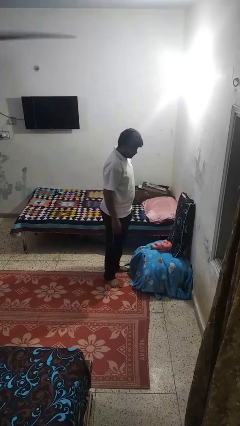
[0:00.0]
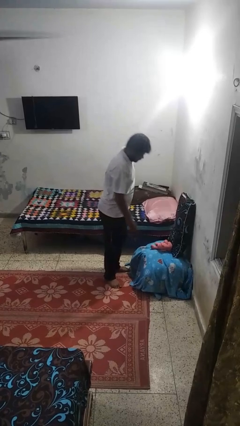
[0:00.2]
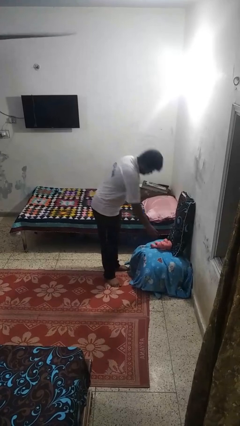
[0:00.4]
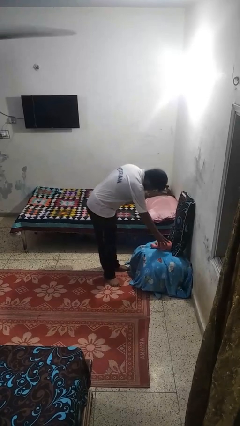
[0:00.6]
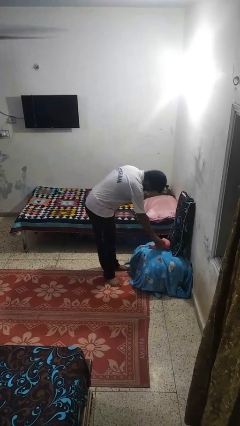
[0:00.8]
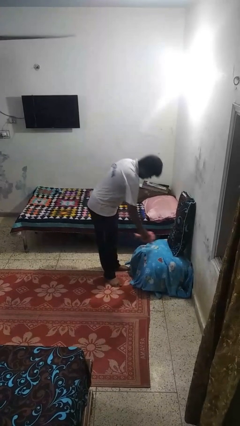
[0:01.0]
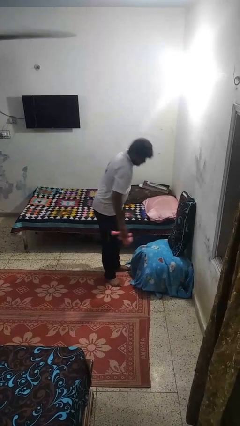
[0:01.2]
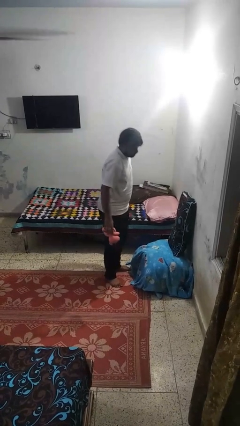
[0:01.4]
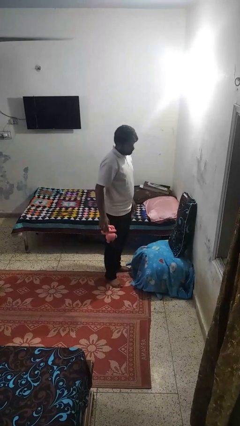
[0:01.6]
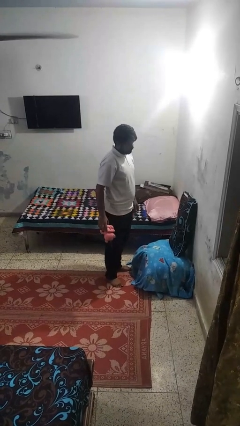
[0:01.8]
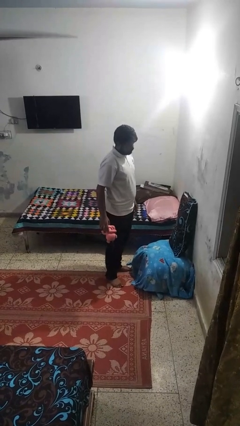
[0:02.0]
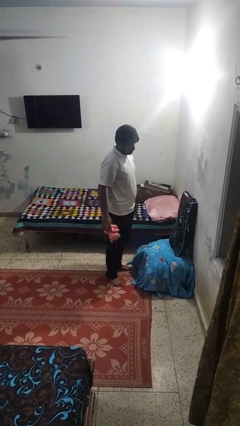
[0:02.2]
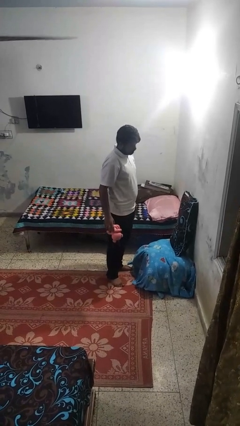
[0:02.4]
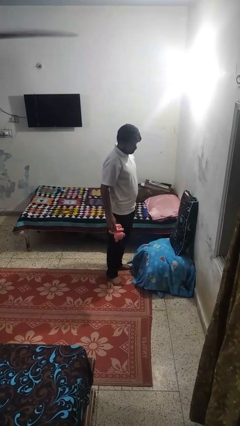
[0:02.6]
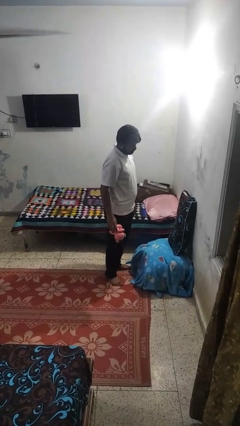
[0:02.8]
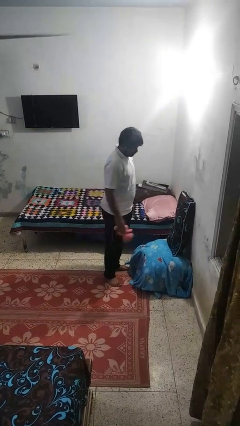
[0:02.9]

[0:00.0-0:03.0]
person picks up object from couch

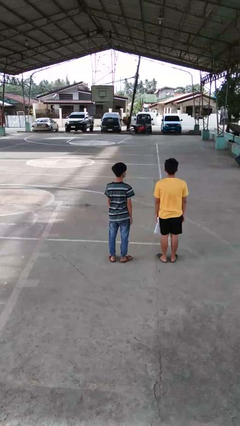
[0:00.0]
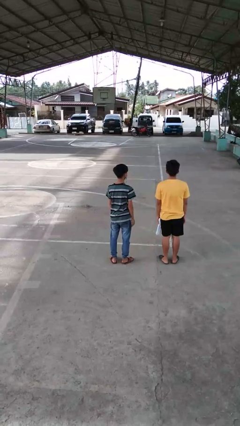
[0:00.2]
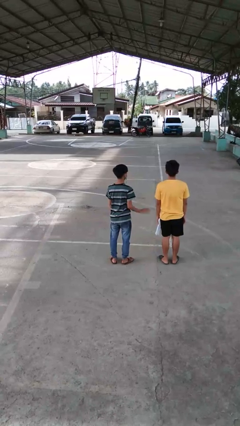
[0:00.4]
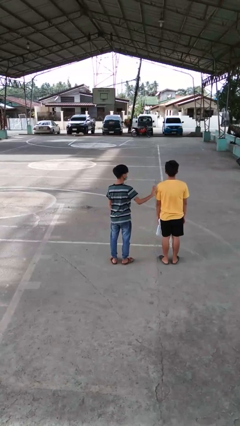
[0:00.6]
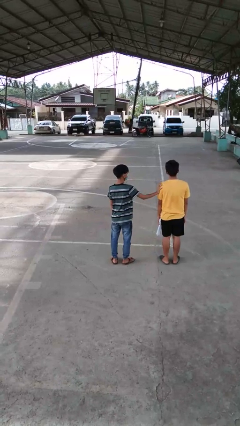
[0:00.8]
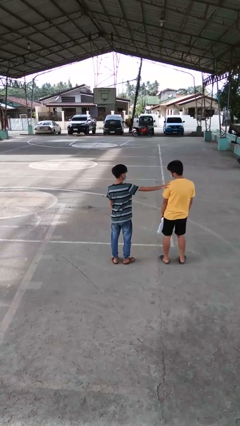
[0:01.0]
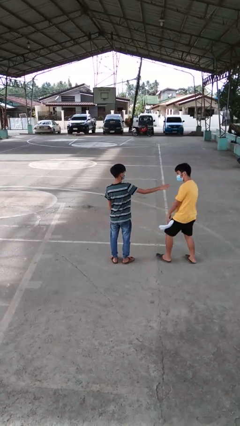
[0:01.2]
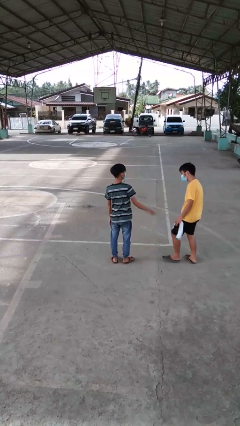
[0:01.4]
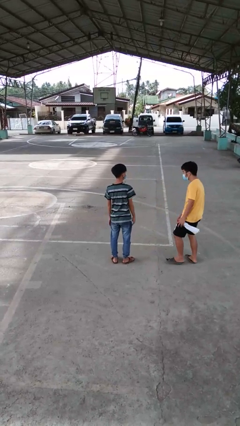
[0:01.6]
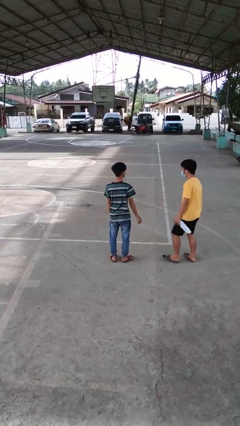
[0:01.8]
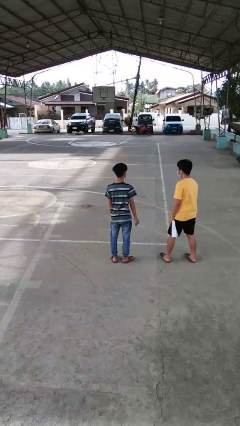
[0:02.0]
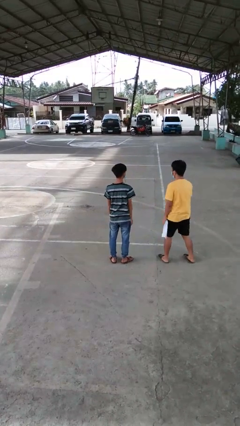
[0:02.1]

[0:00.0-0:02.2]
person shoves person

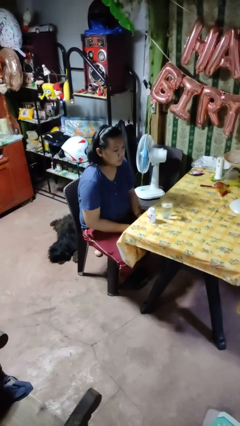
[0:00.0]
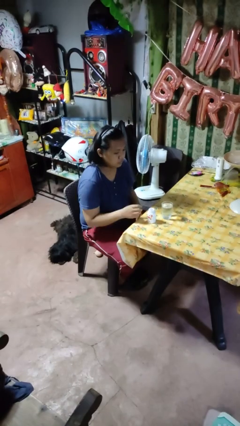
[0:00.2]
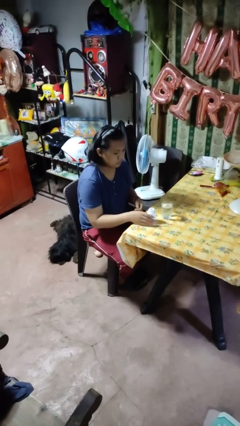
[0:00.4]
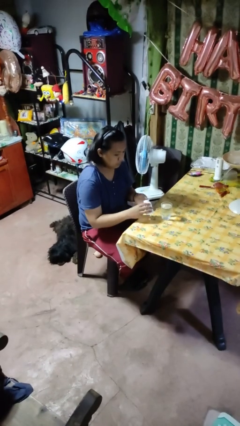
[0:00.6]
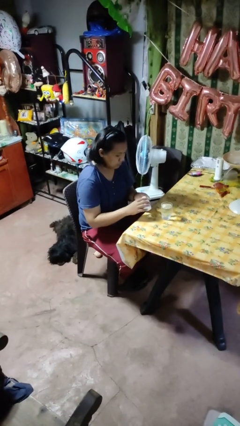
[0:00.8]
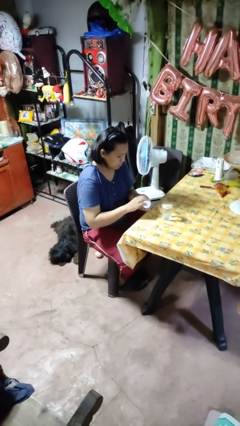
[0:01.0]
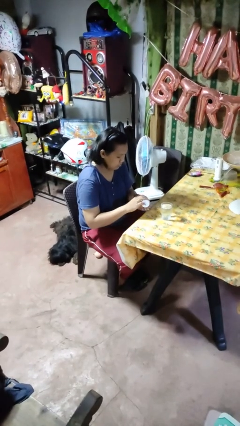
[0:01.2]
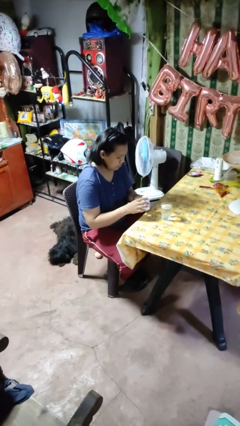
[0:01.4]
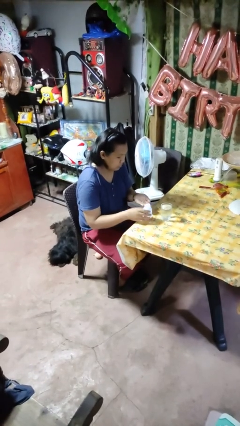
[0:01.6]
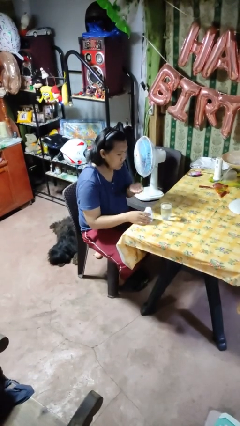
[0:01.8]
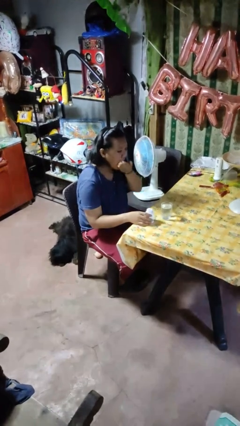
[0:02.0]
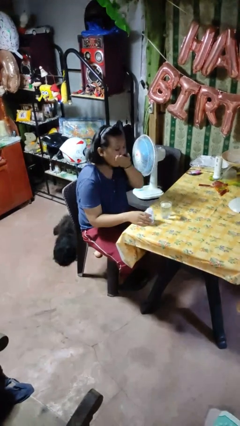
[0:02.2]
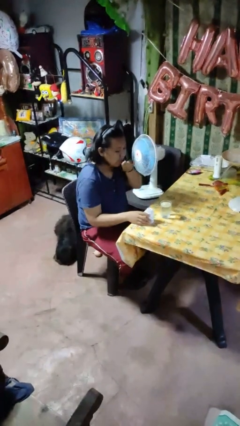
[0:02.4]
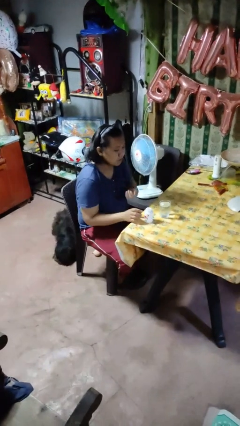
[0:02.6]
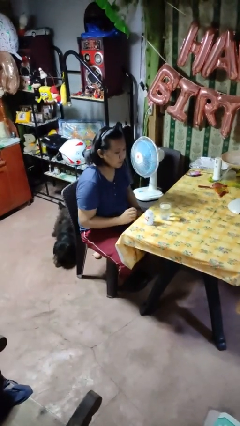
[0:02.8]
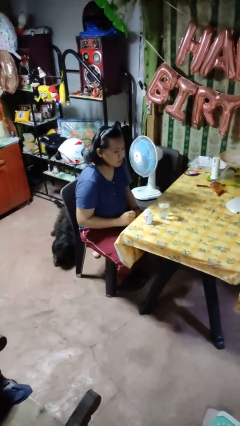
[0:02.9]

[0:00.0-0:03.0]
person takes medicine pills

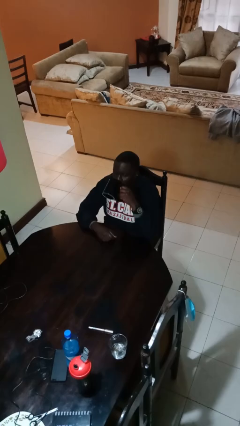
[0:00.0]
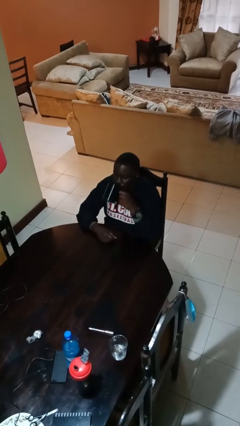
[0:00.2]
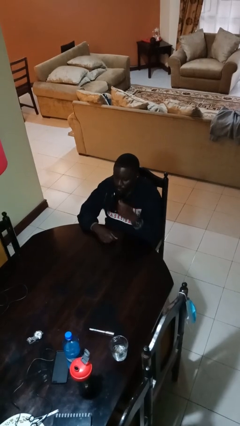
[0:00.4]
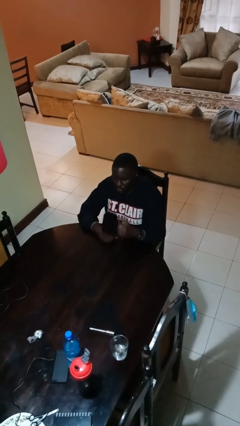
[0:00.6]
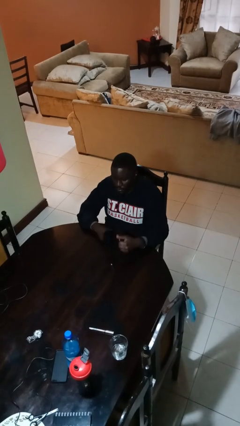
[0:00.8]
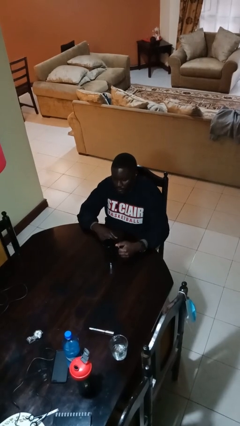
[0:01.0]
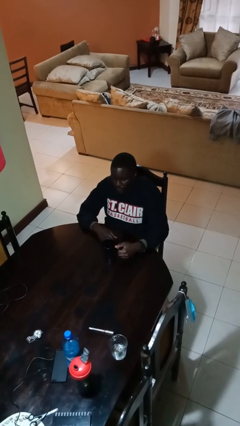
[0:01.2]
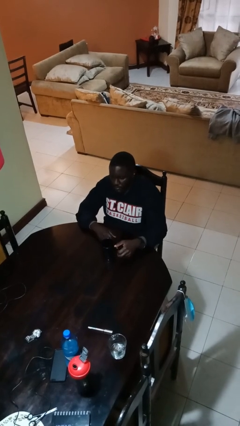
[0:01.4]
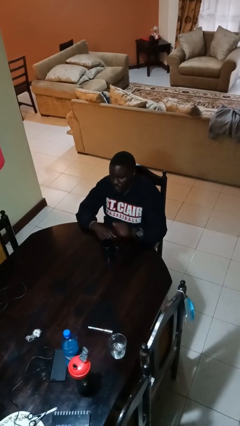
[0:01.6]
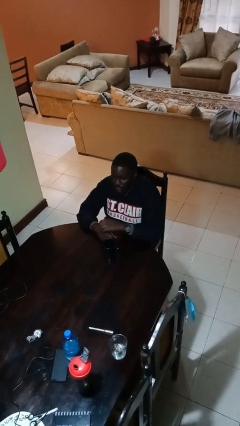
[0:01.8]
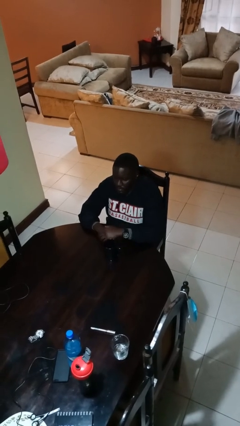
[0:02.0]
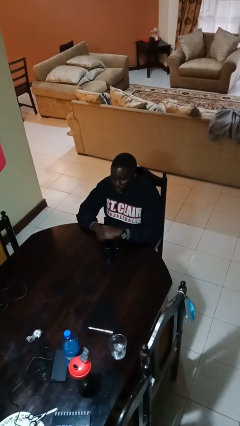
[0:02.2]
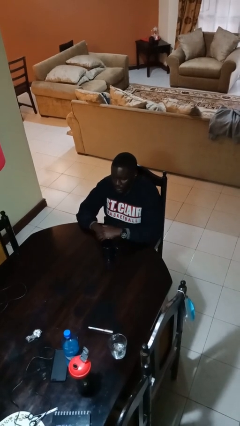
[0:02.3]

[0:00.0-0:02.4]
person puts down object on table

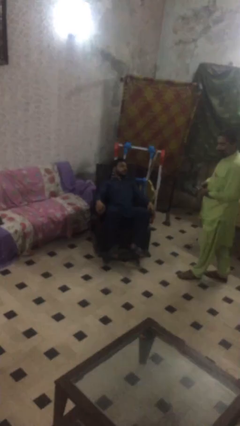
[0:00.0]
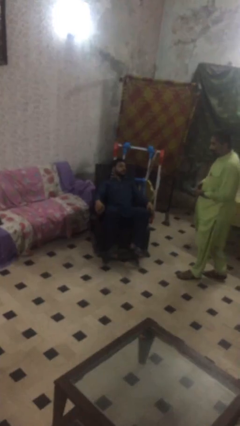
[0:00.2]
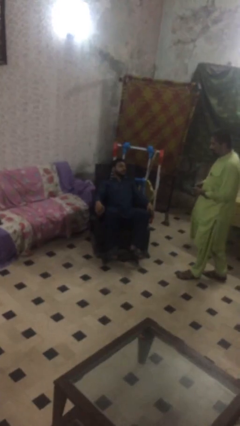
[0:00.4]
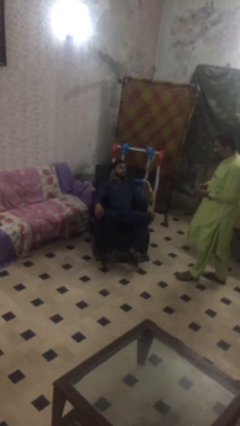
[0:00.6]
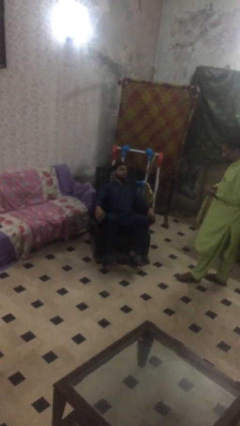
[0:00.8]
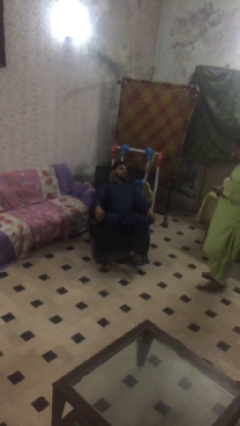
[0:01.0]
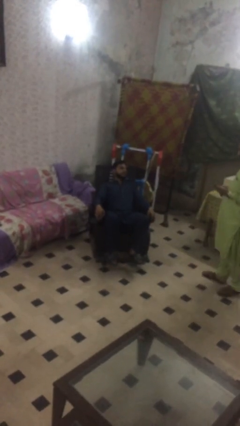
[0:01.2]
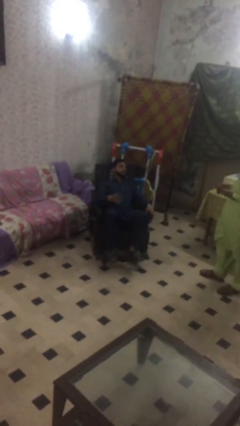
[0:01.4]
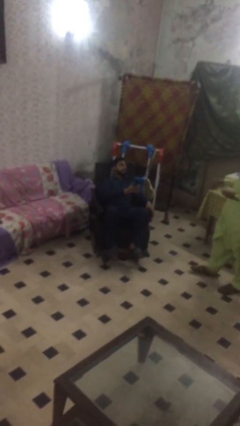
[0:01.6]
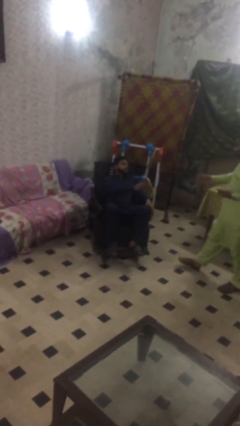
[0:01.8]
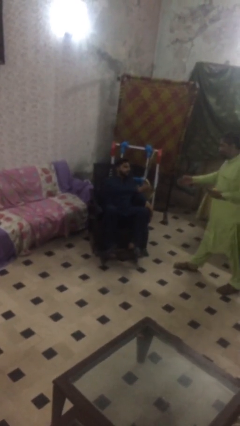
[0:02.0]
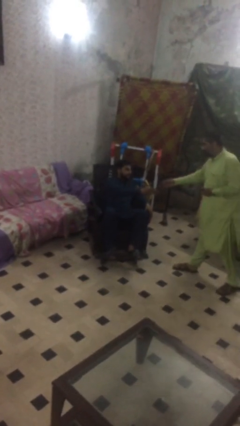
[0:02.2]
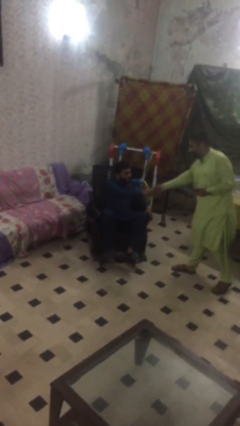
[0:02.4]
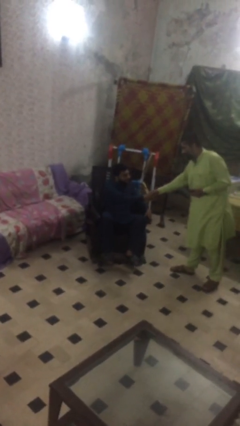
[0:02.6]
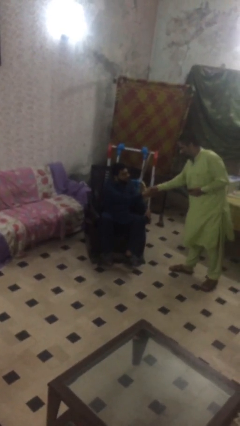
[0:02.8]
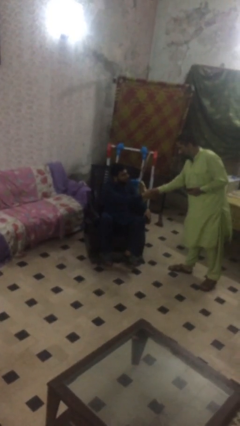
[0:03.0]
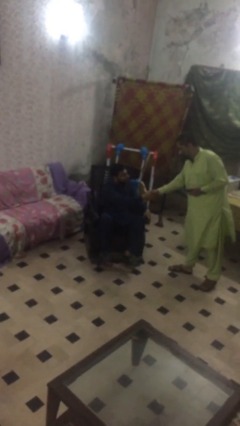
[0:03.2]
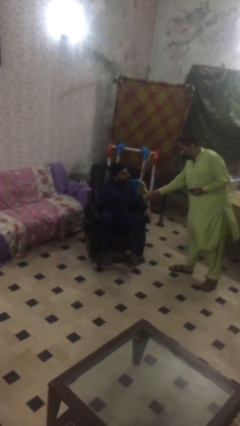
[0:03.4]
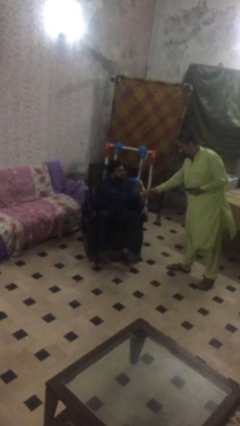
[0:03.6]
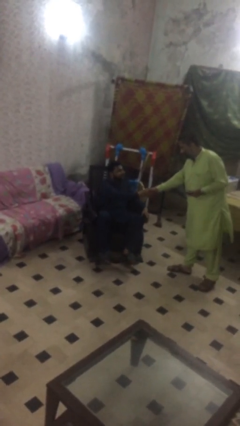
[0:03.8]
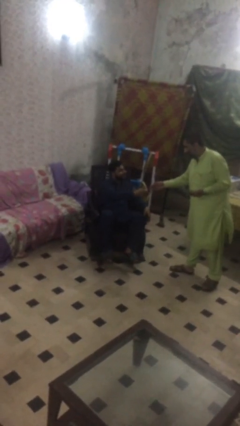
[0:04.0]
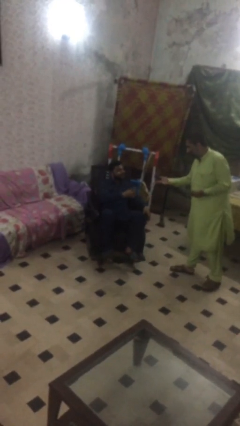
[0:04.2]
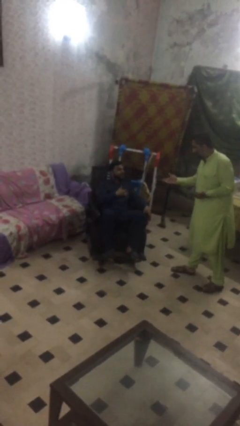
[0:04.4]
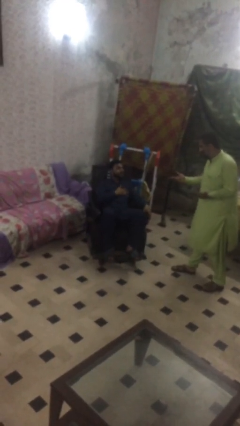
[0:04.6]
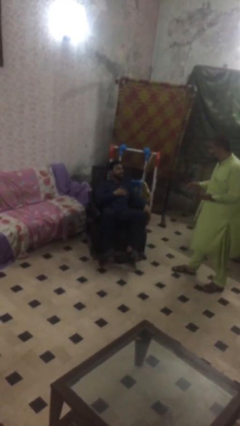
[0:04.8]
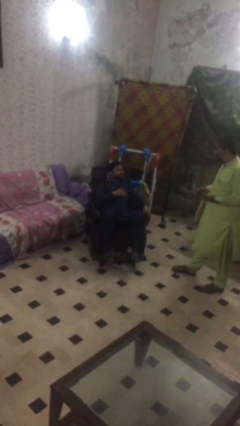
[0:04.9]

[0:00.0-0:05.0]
person shakes hand

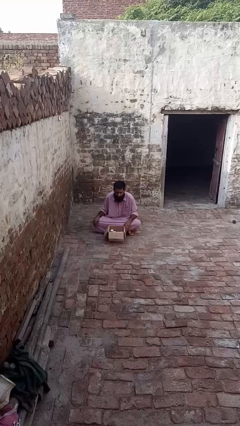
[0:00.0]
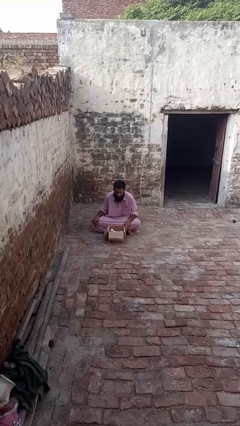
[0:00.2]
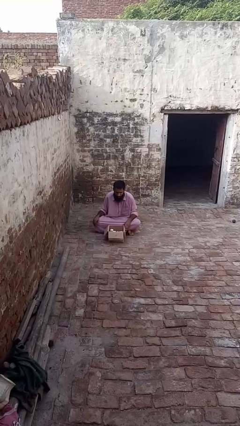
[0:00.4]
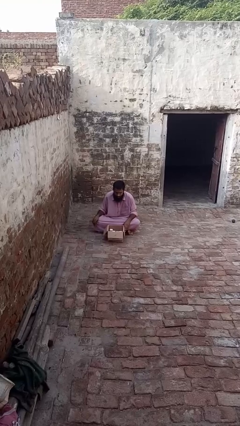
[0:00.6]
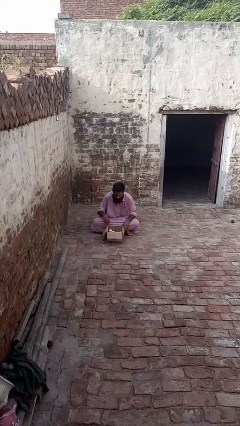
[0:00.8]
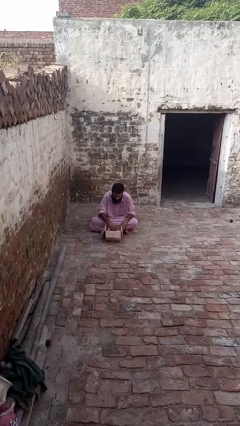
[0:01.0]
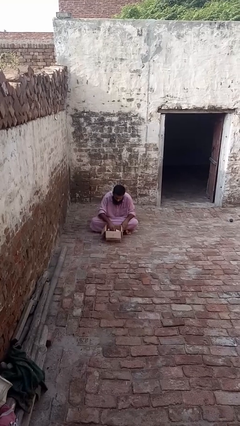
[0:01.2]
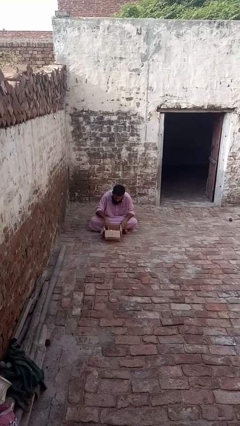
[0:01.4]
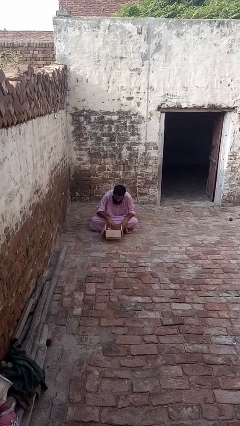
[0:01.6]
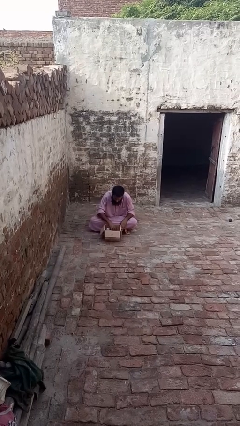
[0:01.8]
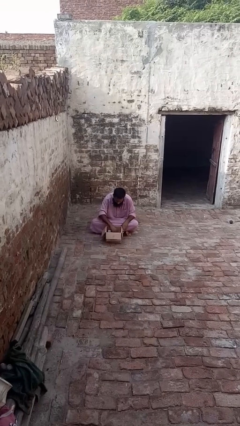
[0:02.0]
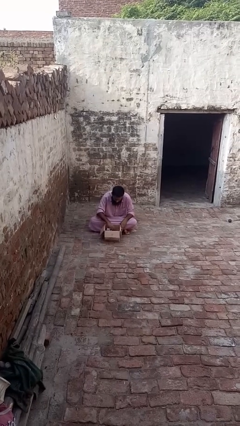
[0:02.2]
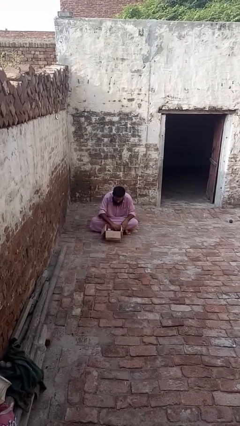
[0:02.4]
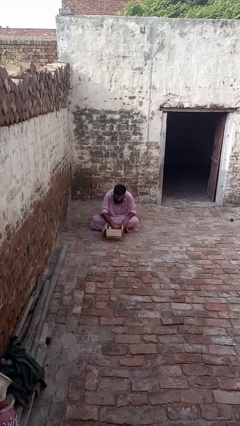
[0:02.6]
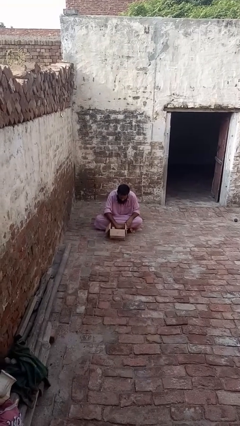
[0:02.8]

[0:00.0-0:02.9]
person searches in box
